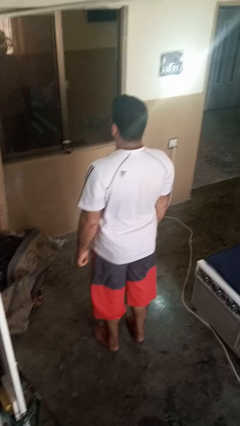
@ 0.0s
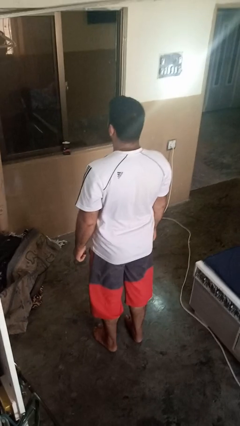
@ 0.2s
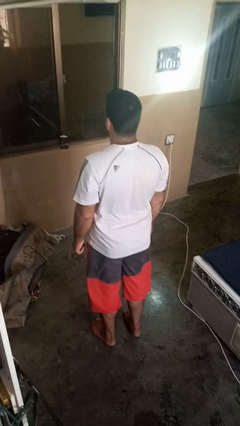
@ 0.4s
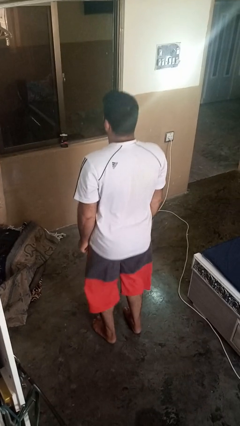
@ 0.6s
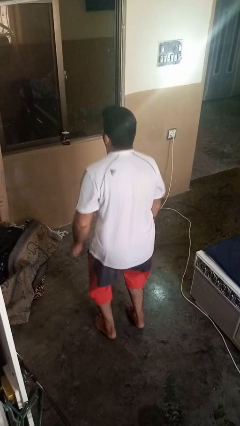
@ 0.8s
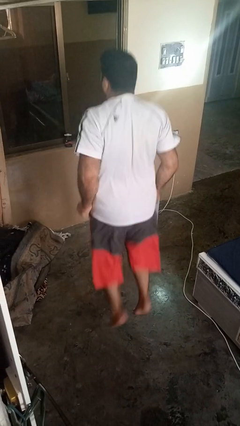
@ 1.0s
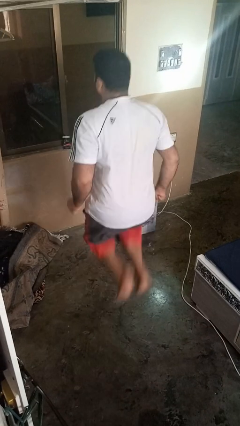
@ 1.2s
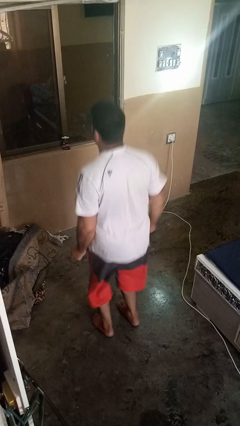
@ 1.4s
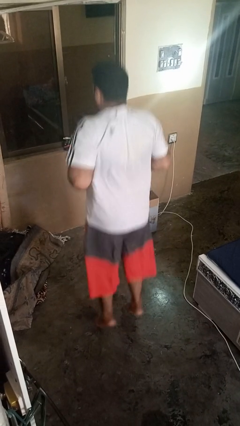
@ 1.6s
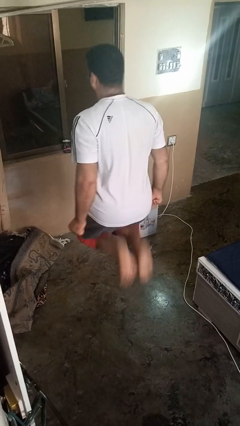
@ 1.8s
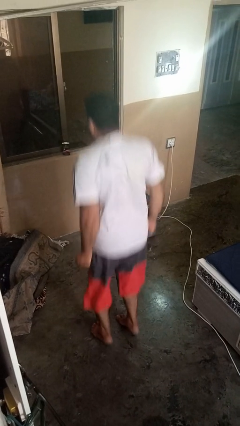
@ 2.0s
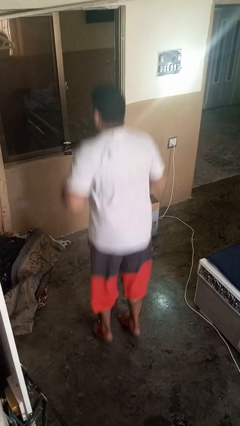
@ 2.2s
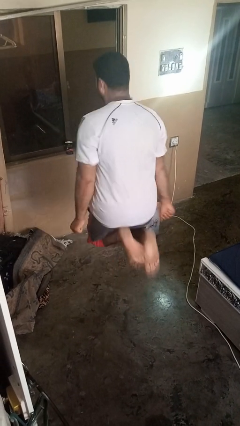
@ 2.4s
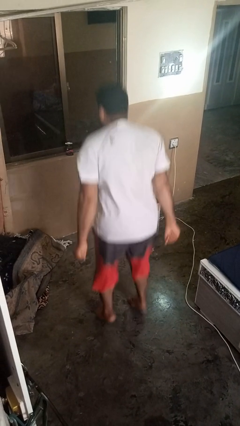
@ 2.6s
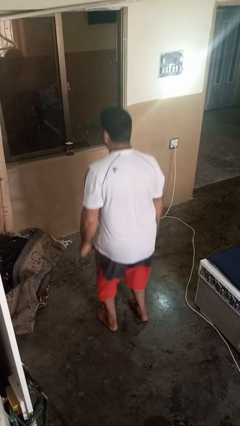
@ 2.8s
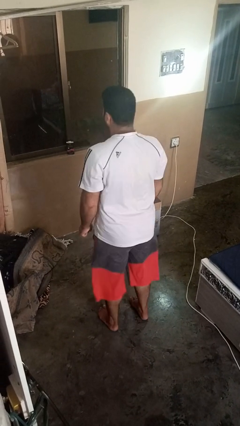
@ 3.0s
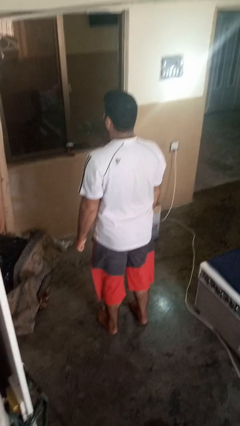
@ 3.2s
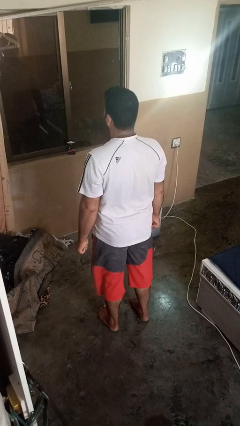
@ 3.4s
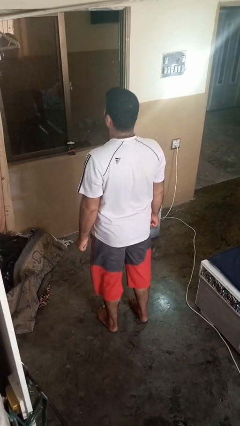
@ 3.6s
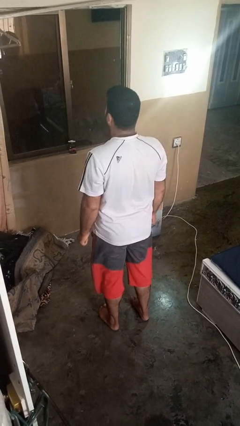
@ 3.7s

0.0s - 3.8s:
person jumps

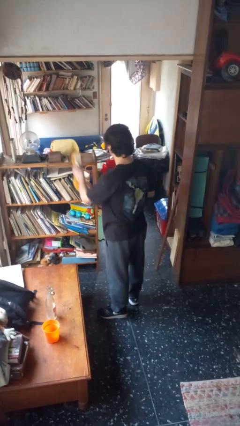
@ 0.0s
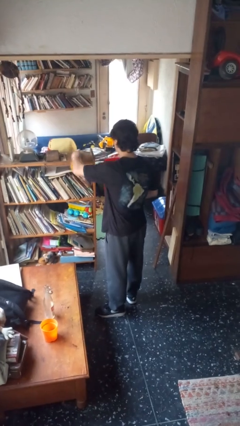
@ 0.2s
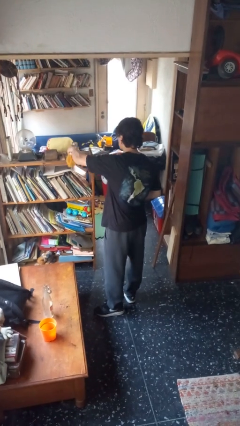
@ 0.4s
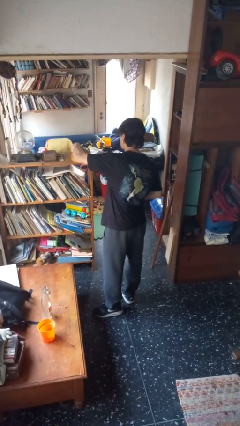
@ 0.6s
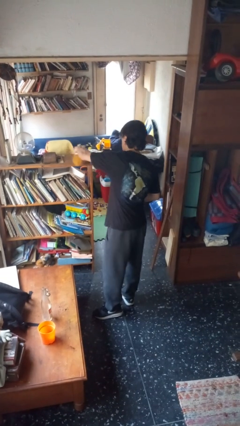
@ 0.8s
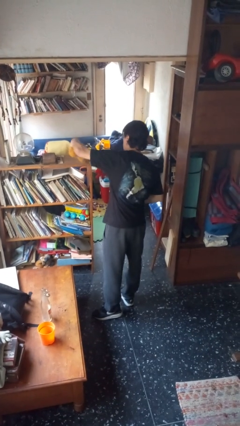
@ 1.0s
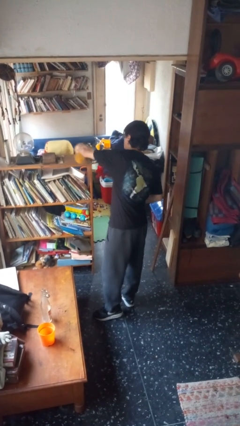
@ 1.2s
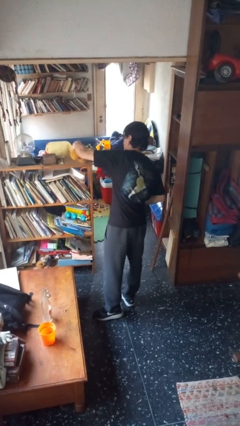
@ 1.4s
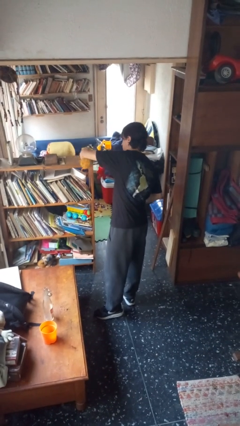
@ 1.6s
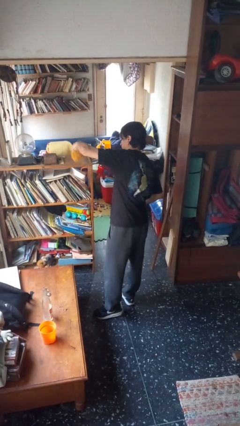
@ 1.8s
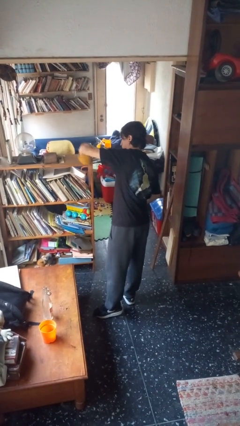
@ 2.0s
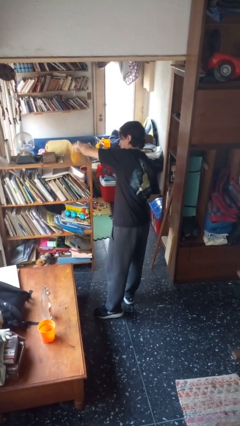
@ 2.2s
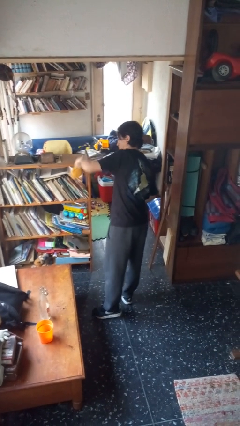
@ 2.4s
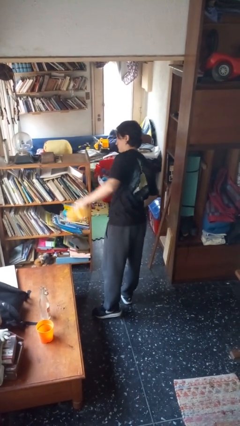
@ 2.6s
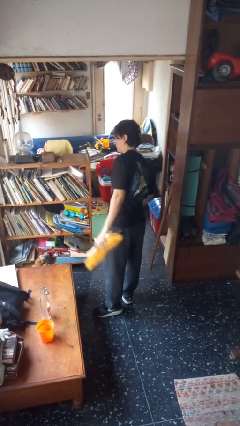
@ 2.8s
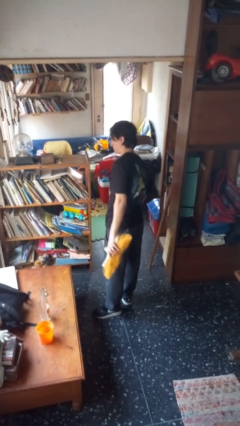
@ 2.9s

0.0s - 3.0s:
person dusts furniture

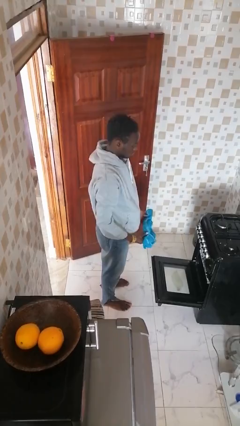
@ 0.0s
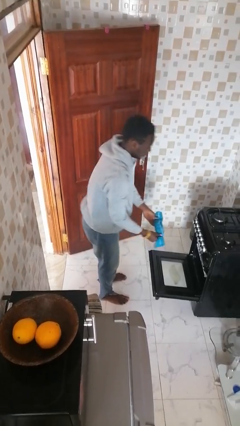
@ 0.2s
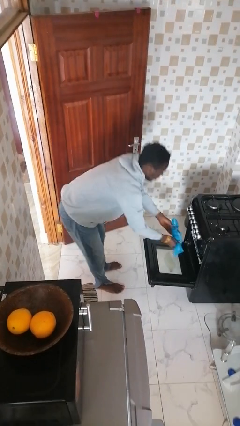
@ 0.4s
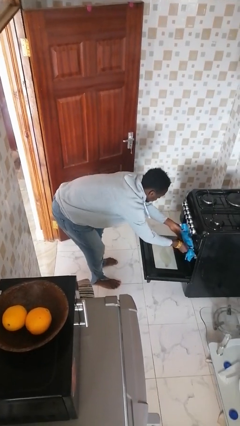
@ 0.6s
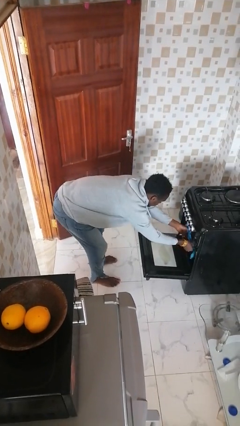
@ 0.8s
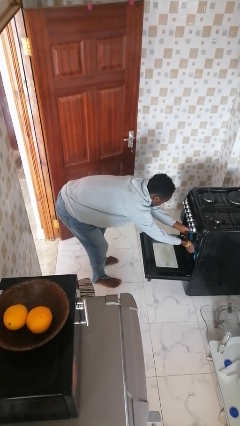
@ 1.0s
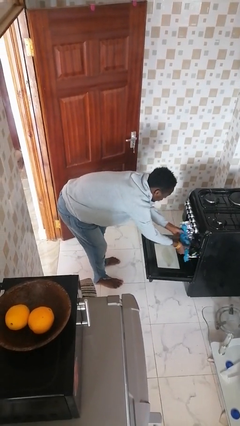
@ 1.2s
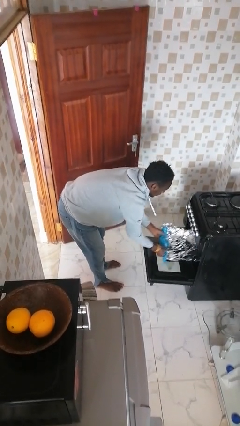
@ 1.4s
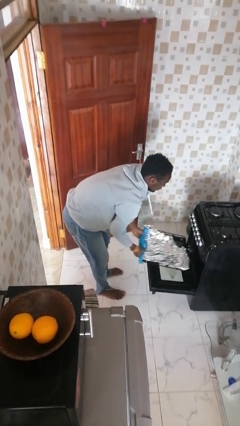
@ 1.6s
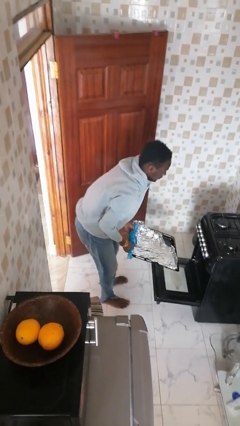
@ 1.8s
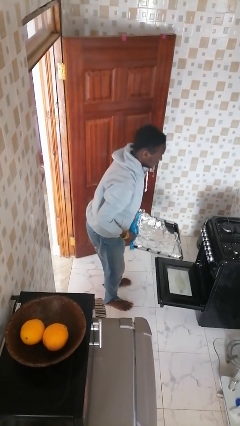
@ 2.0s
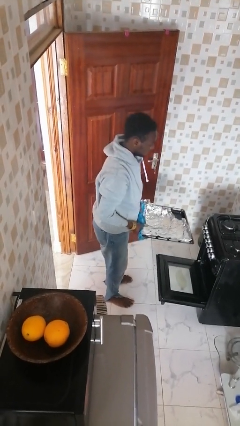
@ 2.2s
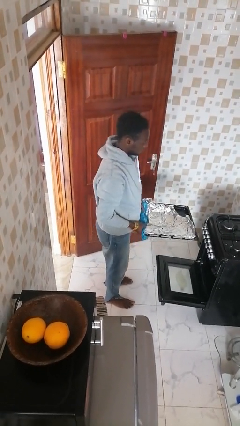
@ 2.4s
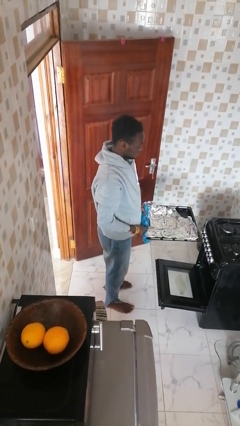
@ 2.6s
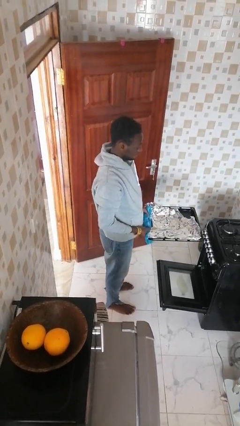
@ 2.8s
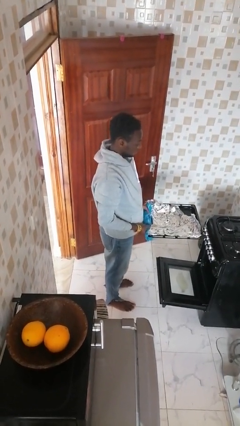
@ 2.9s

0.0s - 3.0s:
person takes object from oven

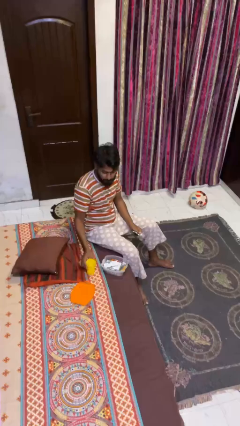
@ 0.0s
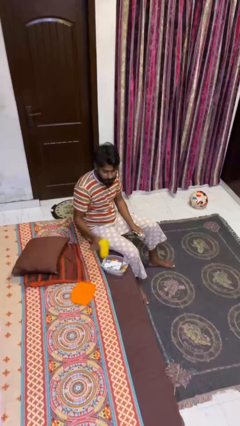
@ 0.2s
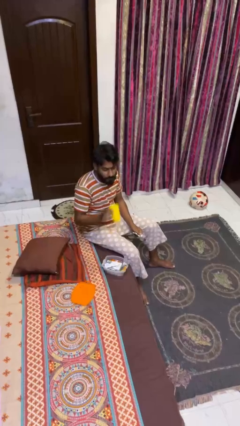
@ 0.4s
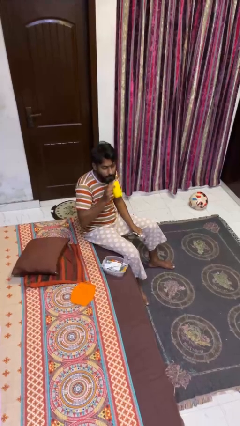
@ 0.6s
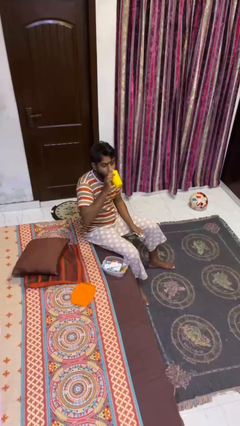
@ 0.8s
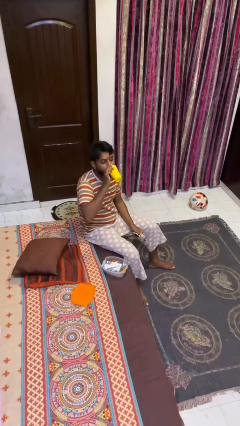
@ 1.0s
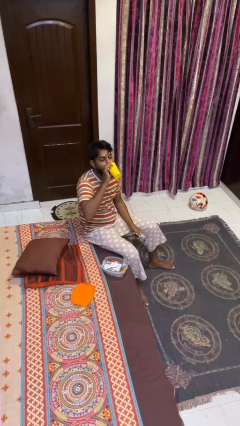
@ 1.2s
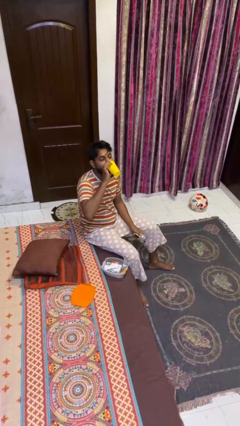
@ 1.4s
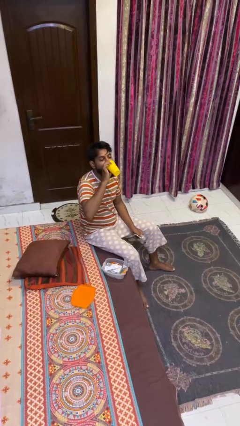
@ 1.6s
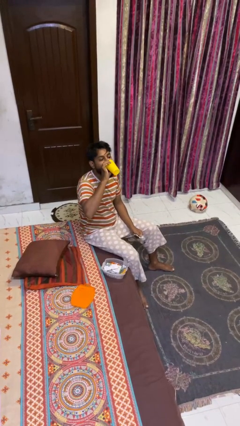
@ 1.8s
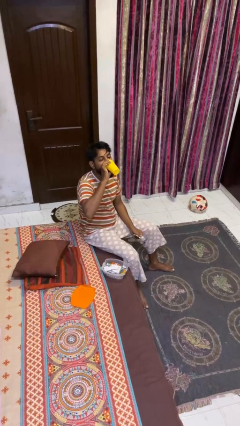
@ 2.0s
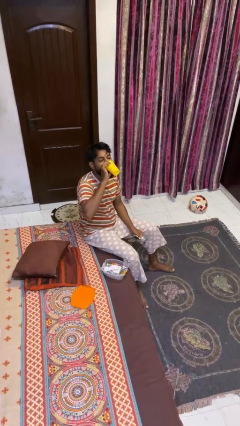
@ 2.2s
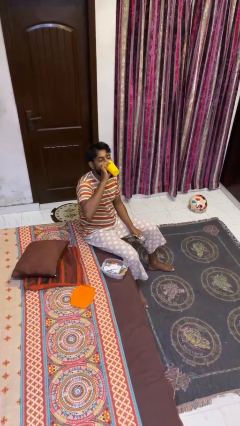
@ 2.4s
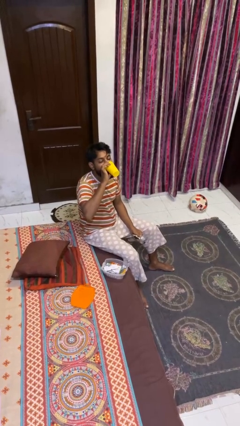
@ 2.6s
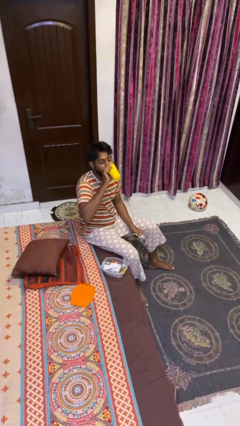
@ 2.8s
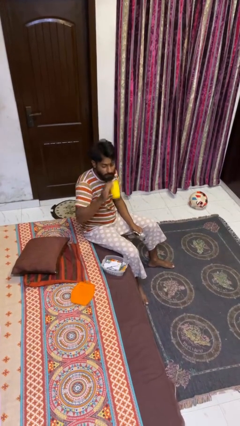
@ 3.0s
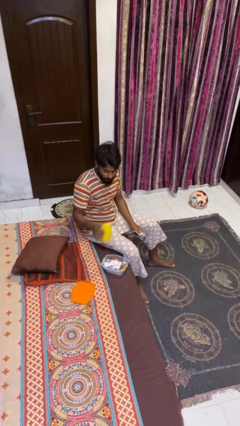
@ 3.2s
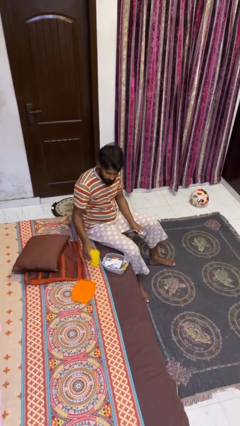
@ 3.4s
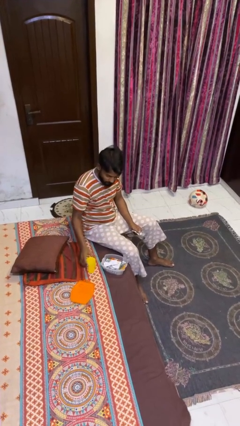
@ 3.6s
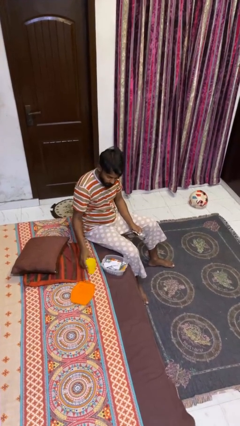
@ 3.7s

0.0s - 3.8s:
person drinks from cup

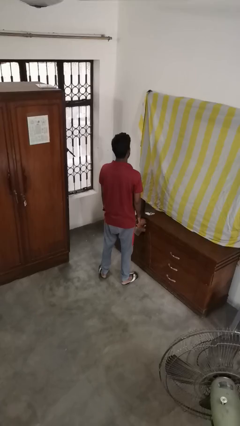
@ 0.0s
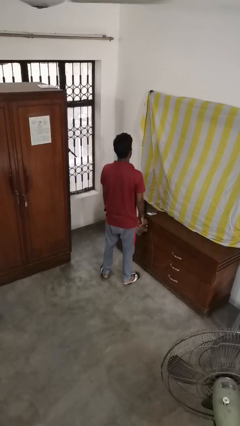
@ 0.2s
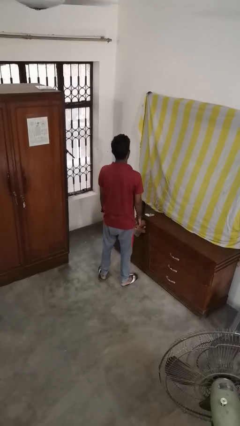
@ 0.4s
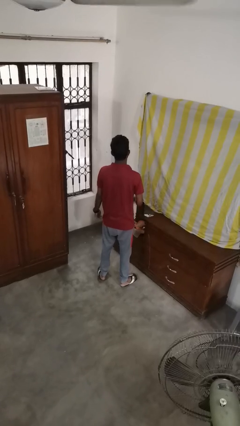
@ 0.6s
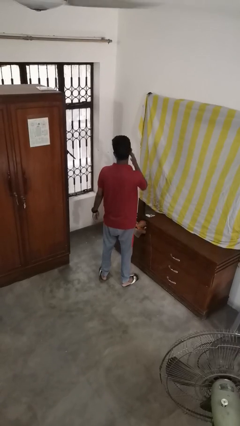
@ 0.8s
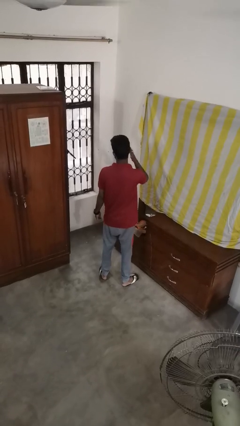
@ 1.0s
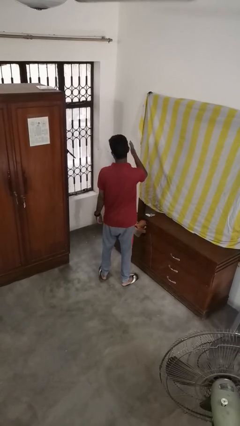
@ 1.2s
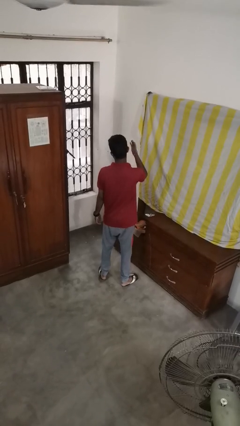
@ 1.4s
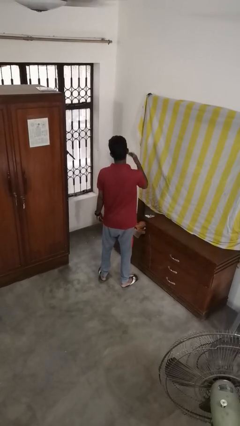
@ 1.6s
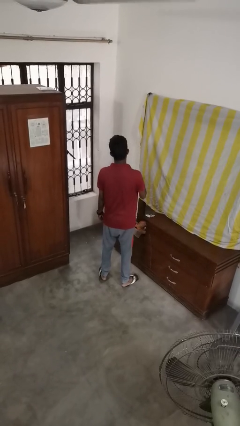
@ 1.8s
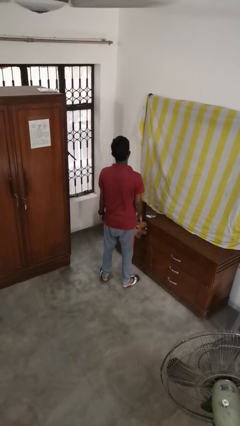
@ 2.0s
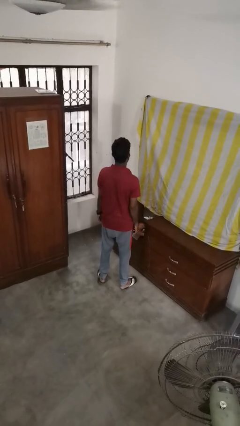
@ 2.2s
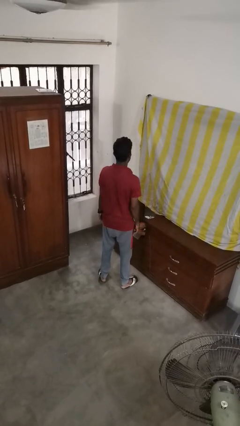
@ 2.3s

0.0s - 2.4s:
person puts fingers in ear

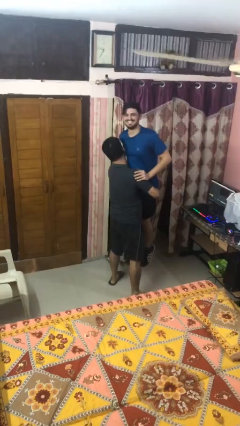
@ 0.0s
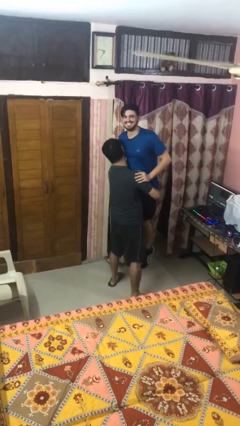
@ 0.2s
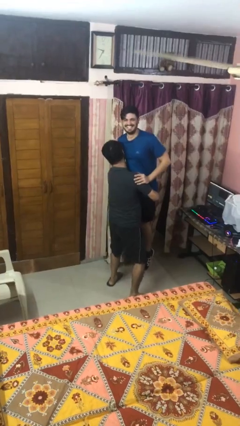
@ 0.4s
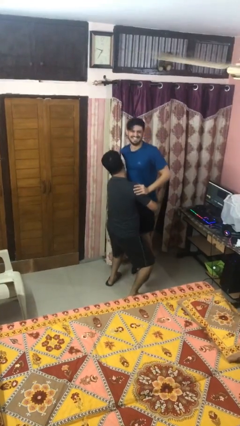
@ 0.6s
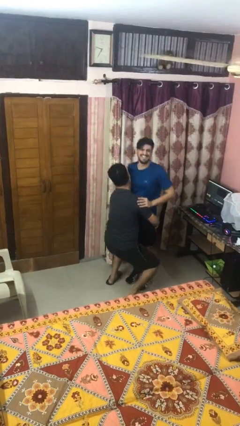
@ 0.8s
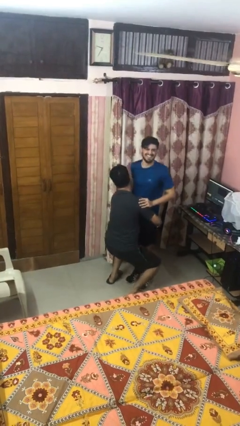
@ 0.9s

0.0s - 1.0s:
person puts down person

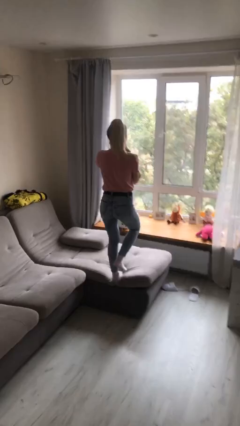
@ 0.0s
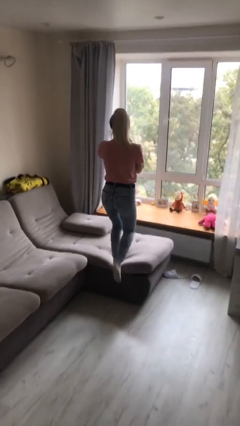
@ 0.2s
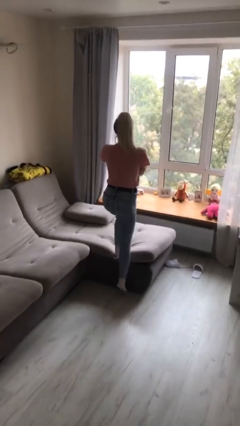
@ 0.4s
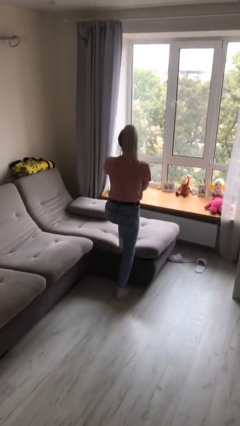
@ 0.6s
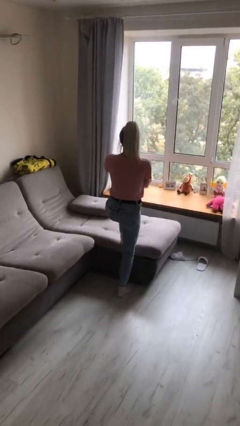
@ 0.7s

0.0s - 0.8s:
person climbs off couch
